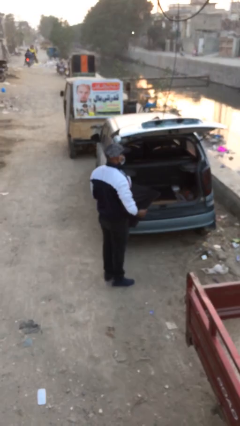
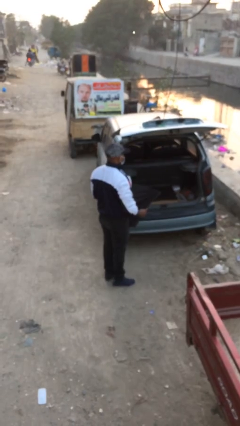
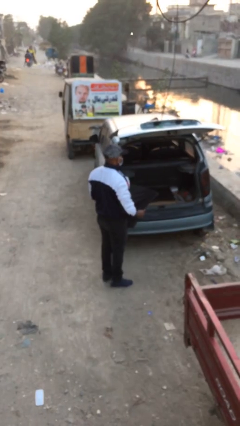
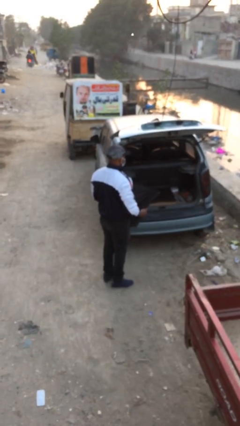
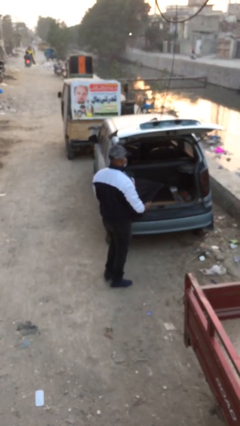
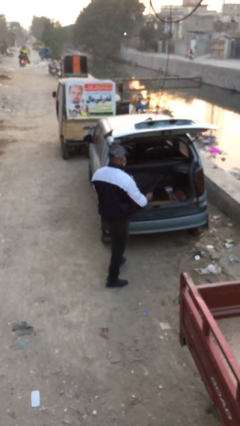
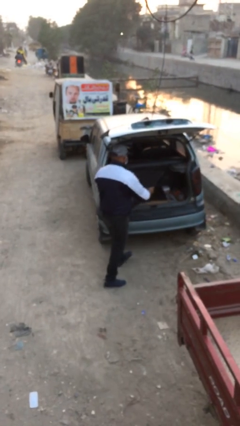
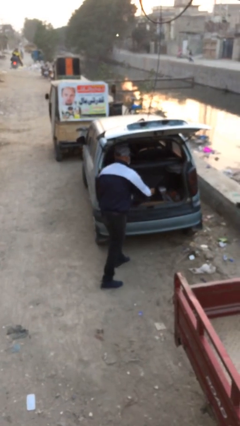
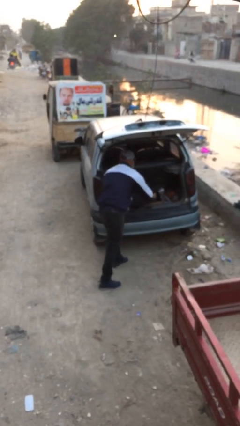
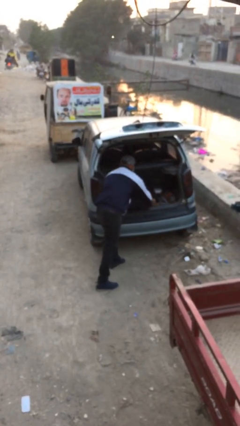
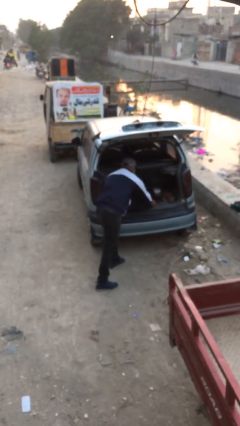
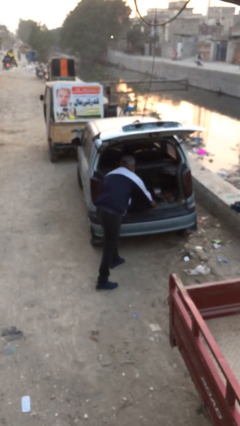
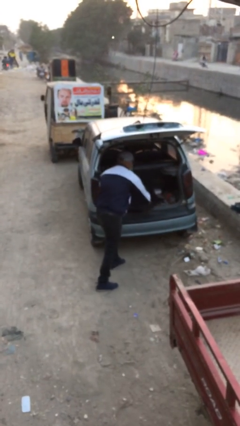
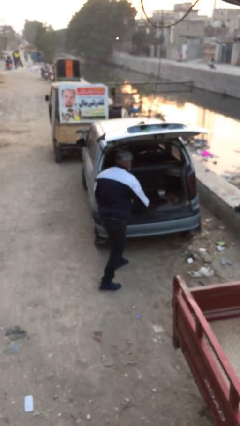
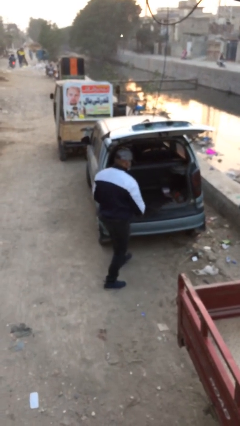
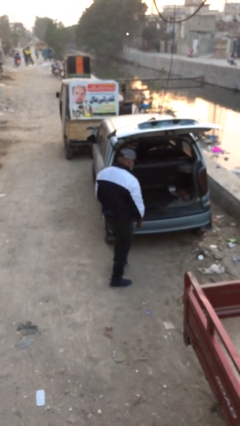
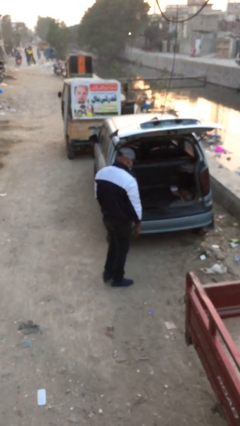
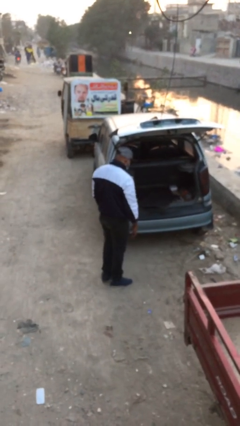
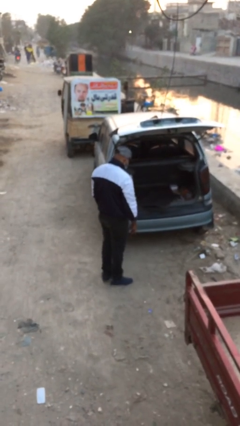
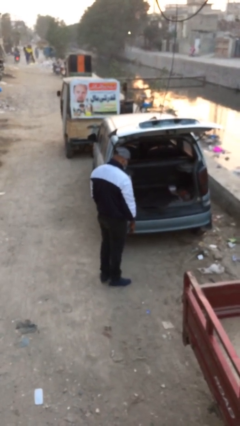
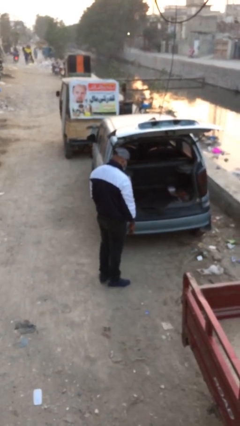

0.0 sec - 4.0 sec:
person loads car

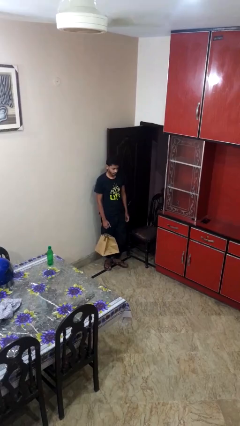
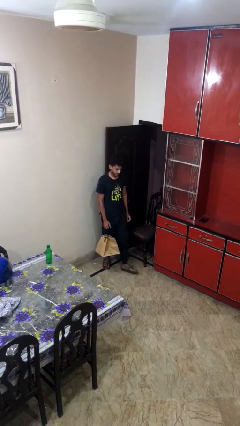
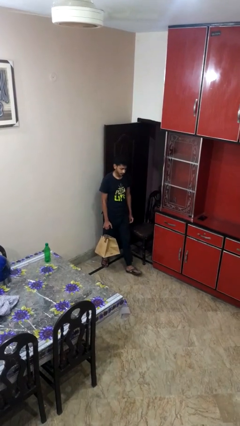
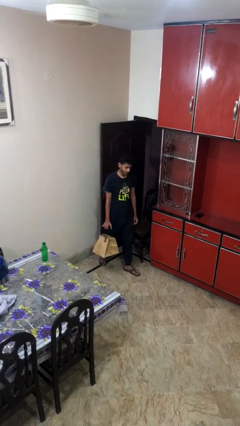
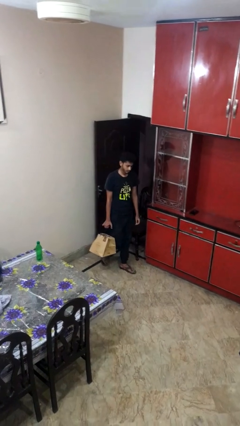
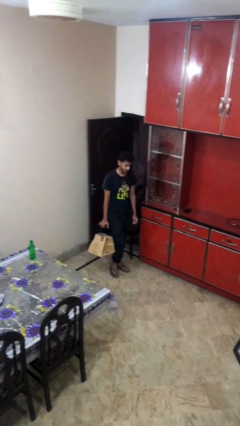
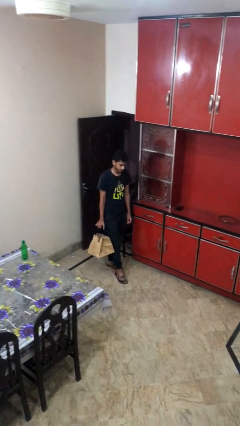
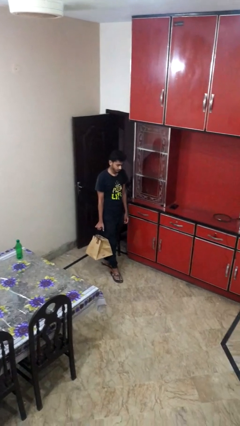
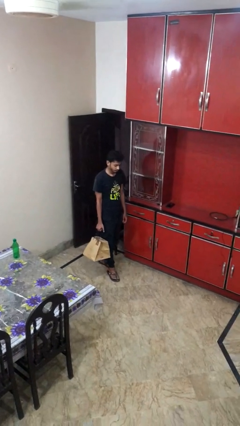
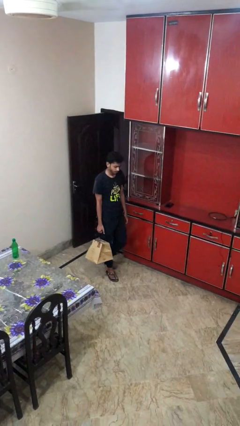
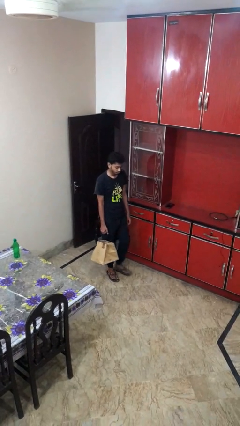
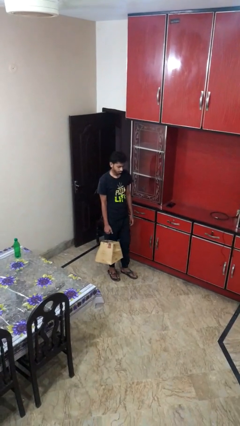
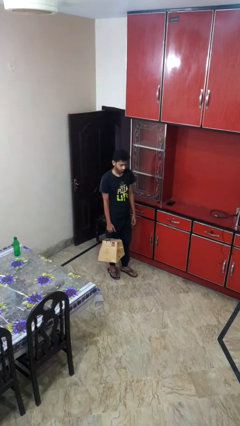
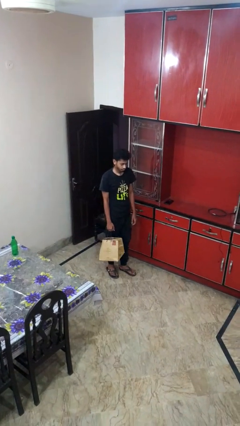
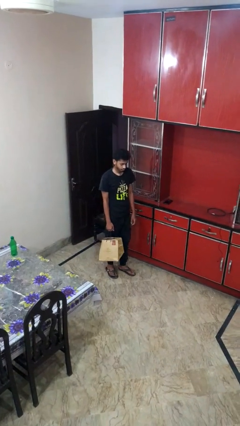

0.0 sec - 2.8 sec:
person carries groceries

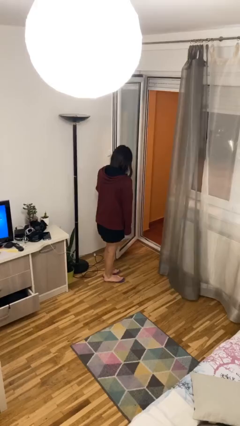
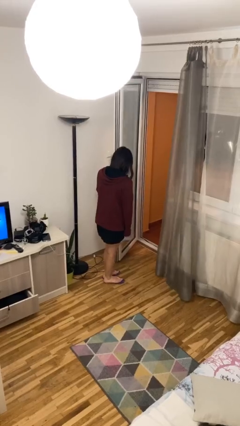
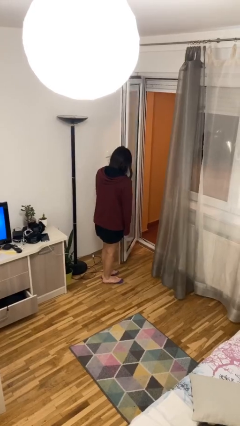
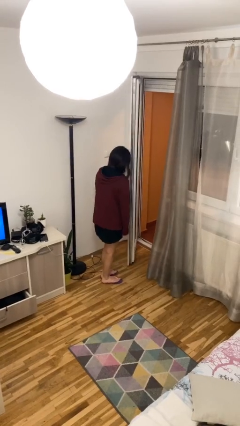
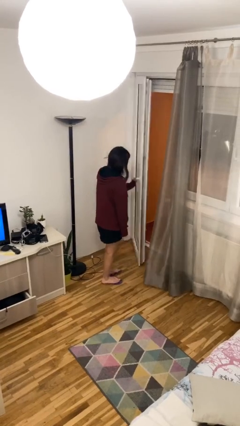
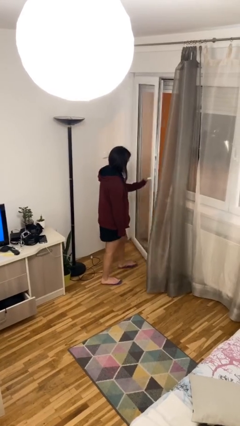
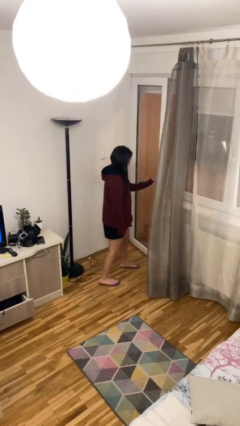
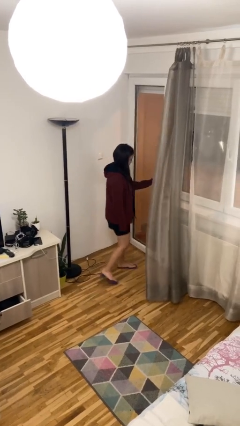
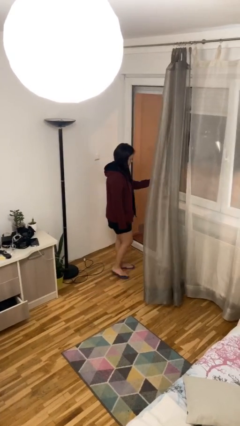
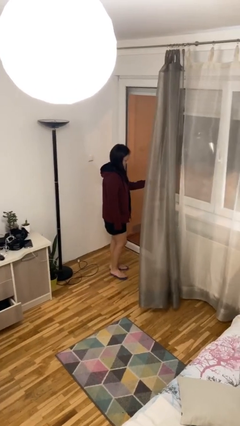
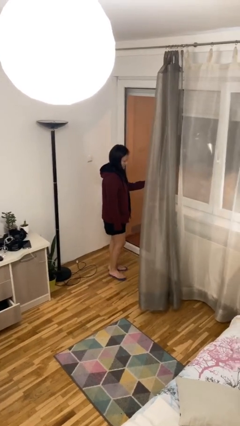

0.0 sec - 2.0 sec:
person closes facility door

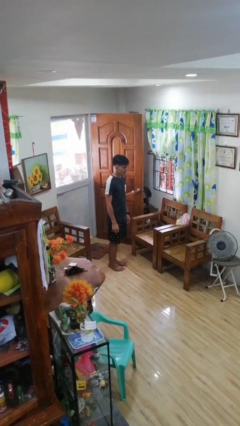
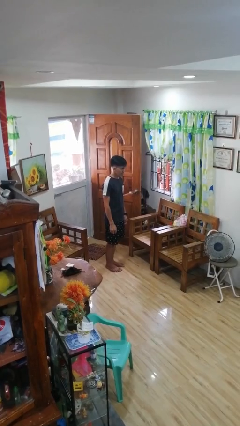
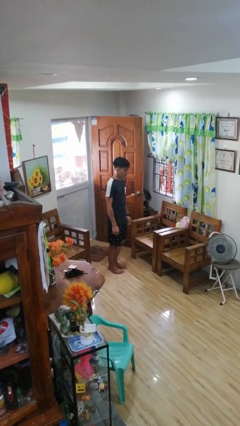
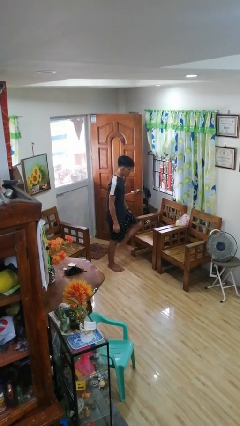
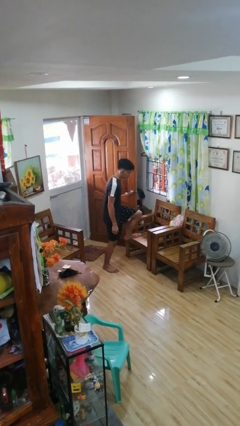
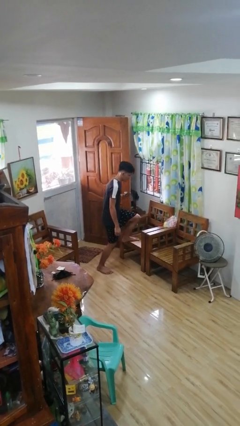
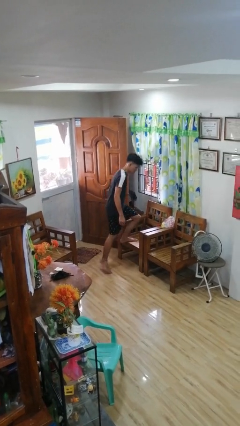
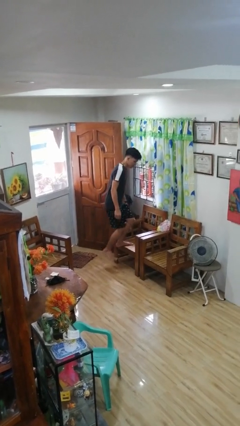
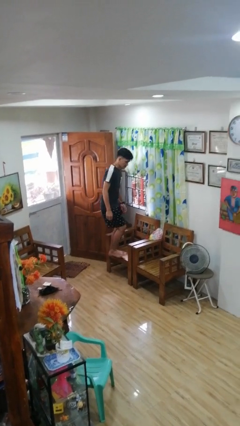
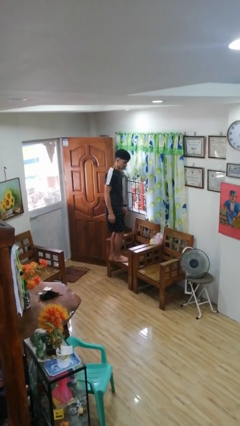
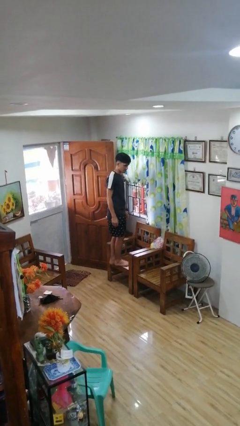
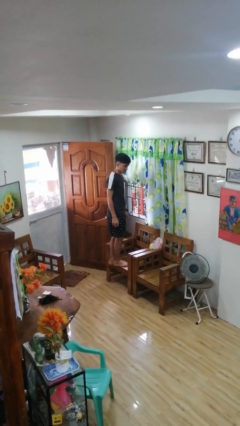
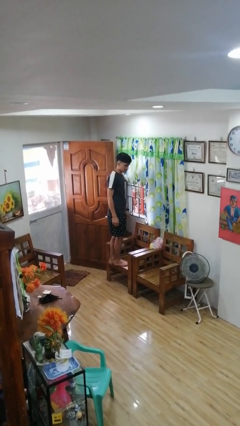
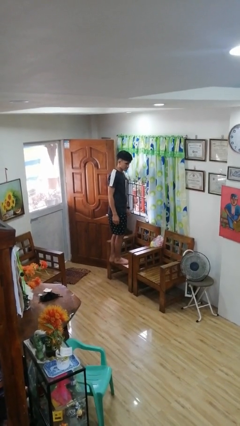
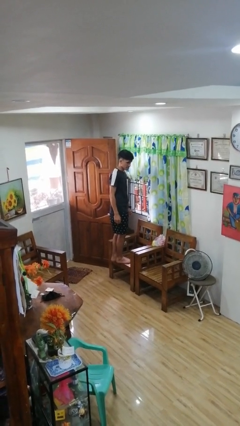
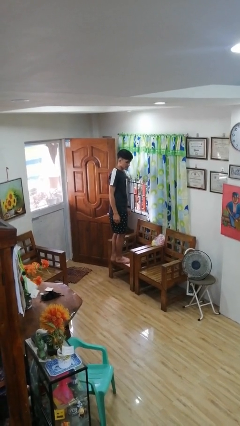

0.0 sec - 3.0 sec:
person climbs on chair

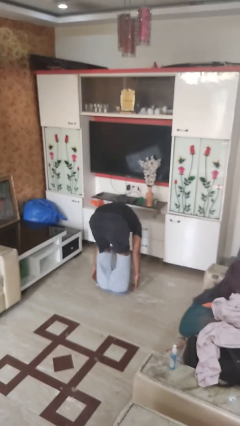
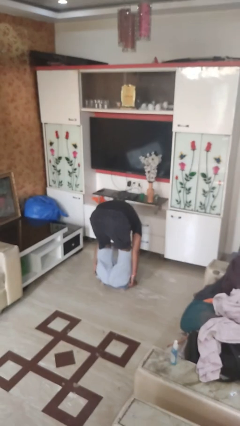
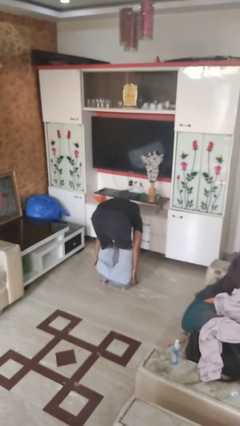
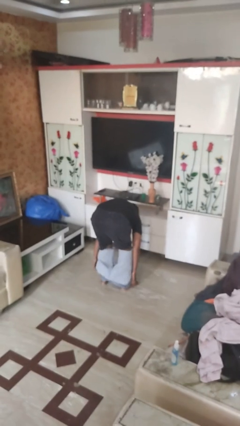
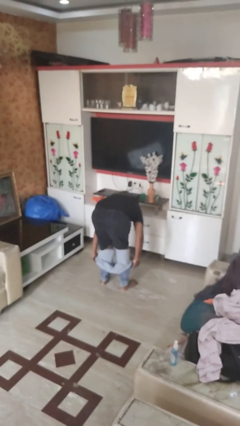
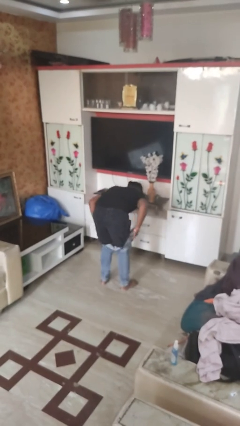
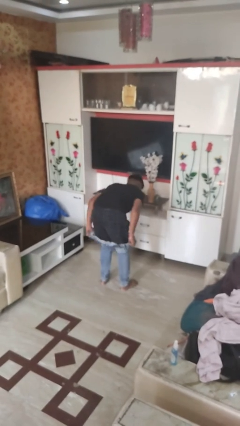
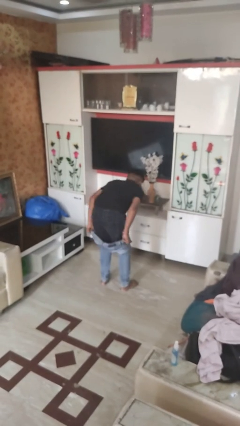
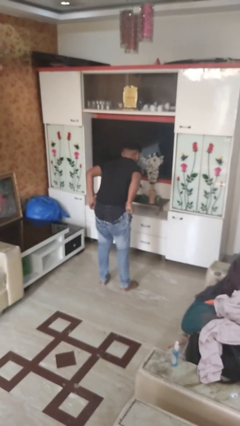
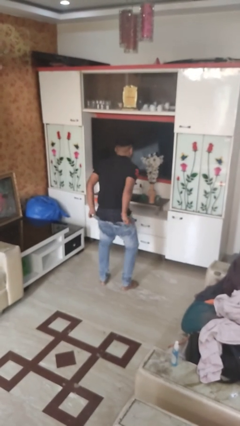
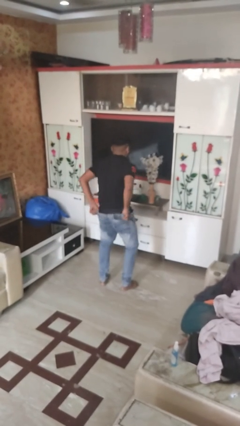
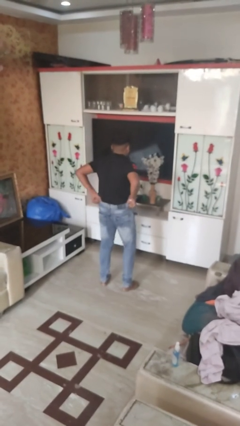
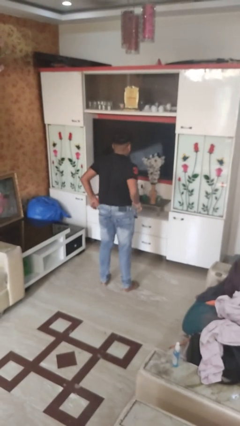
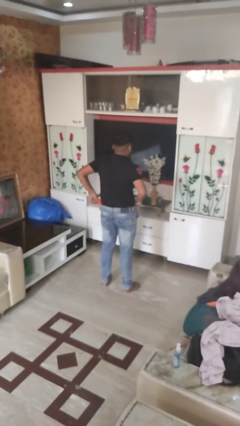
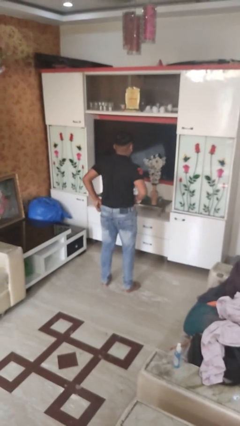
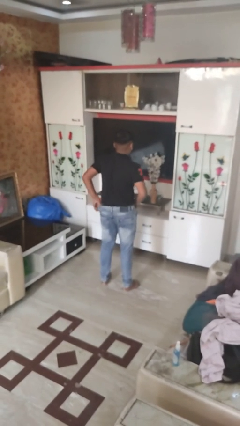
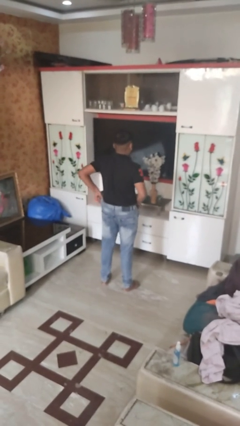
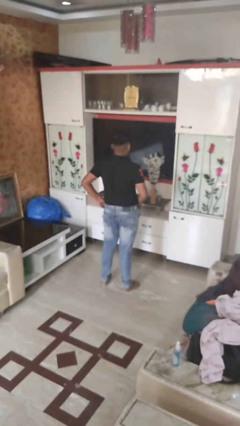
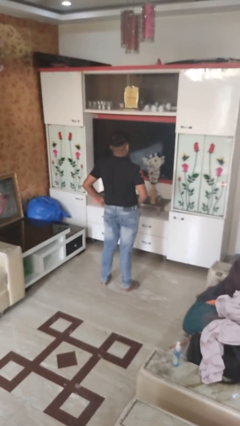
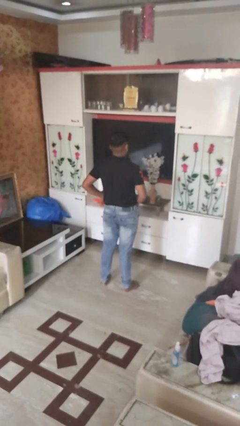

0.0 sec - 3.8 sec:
person puts on pants

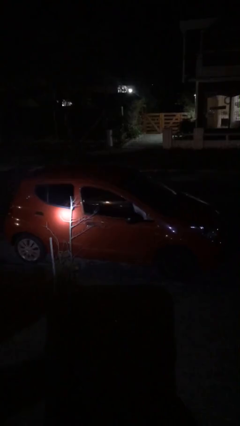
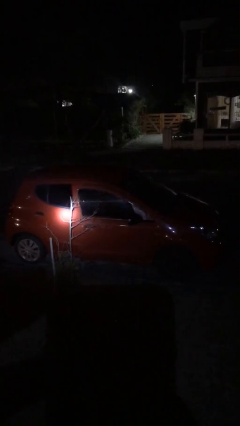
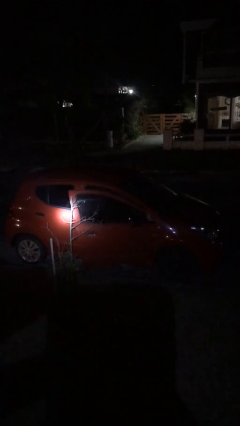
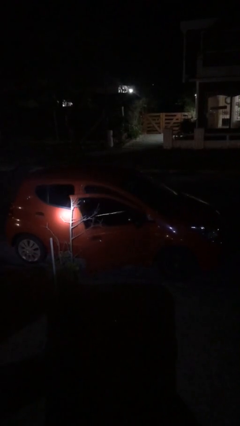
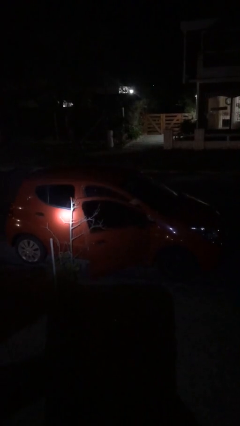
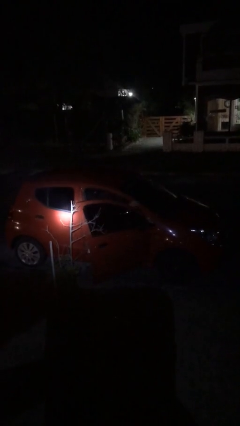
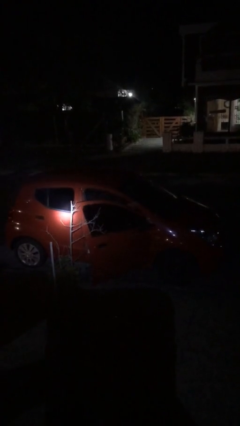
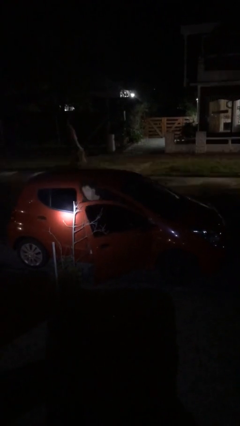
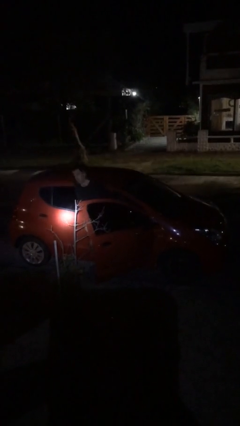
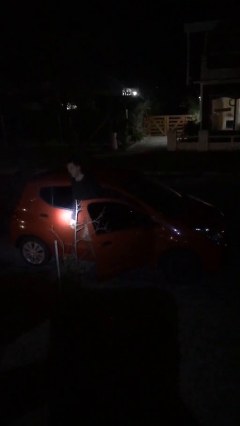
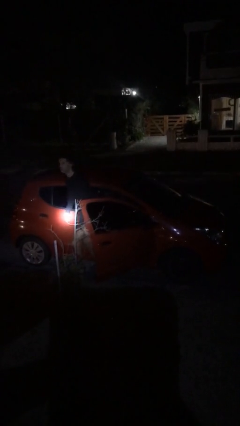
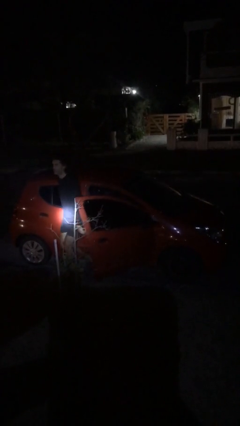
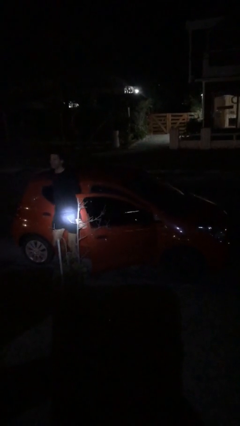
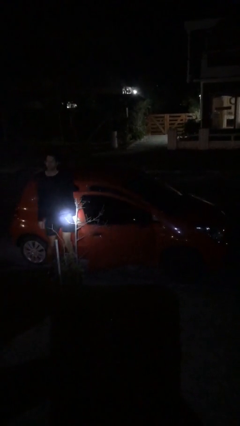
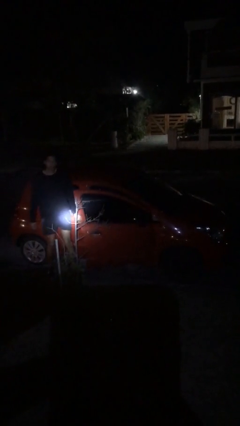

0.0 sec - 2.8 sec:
car drops off person
